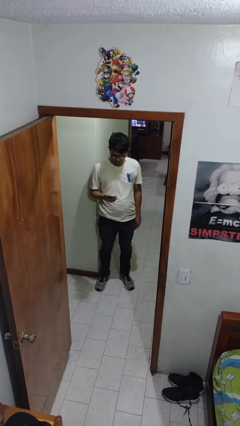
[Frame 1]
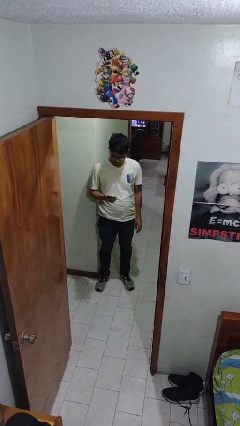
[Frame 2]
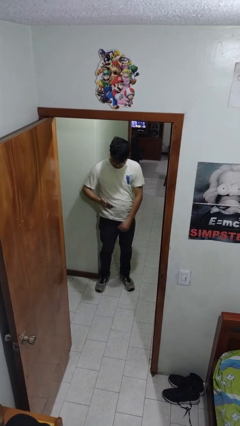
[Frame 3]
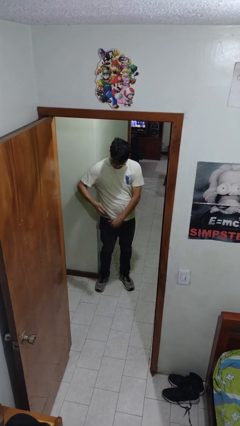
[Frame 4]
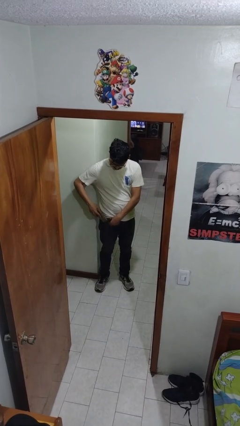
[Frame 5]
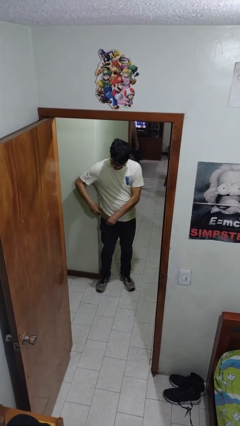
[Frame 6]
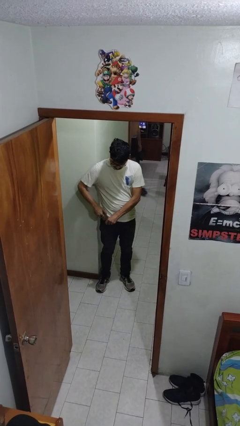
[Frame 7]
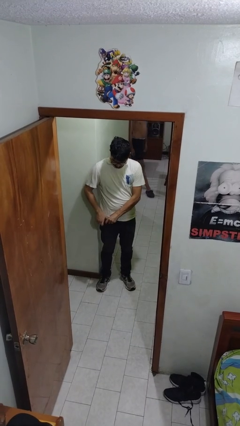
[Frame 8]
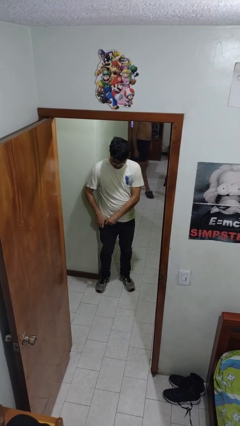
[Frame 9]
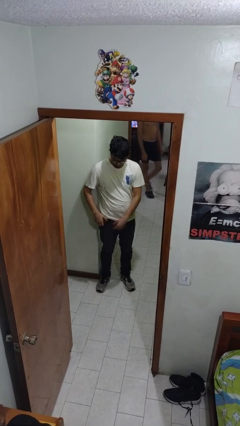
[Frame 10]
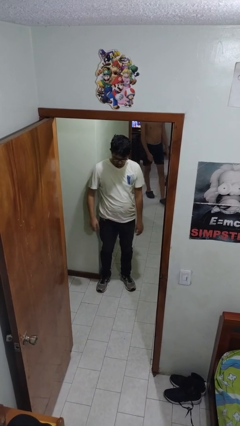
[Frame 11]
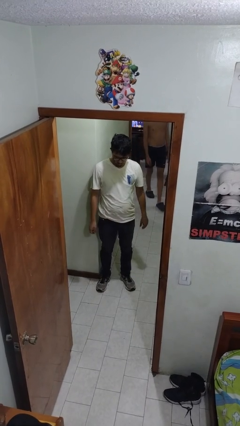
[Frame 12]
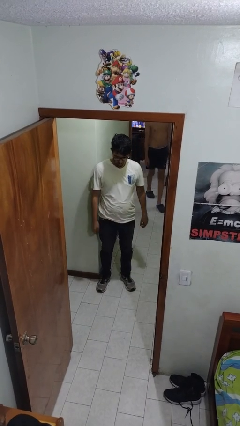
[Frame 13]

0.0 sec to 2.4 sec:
person puts phone into pocket

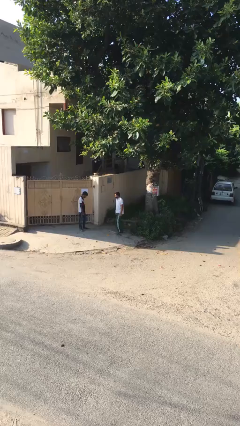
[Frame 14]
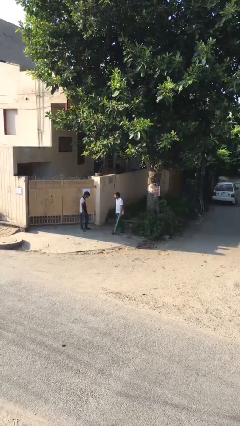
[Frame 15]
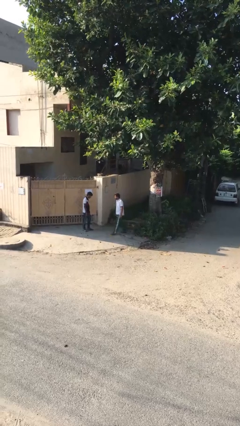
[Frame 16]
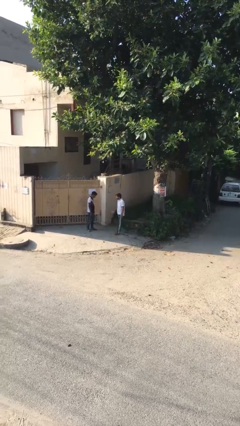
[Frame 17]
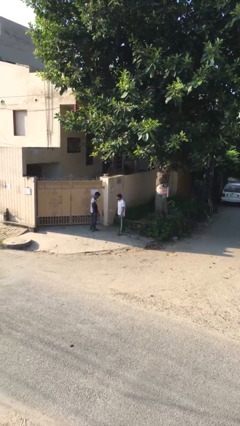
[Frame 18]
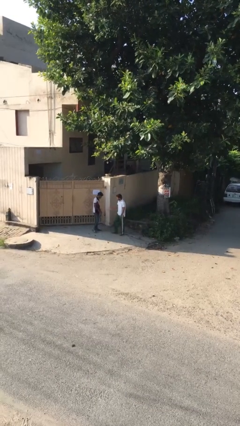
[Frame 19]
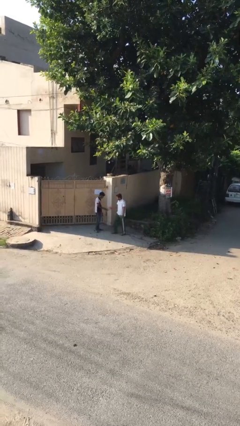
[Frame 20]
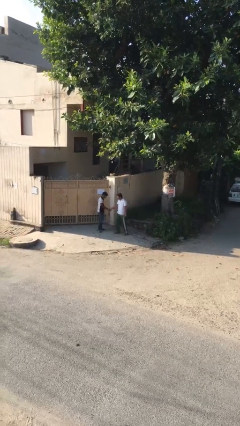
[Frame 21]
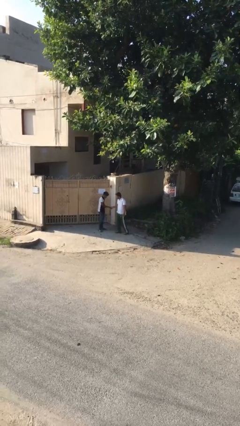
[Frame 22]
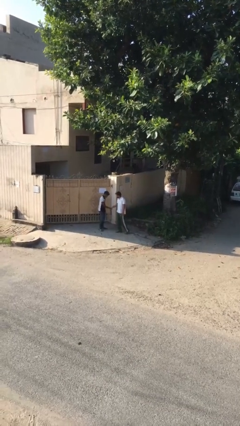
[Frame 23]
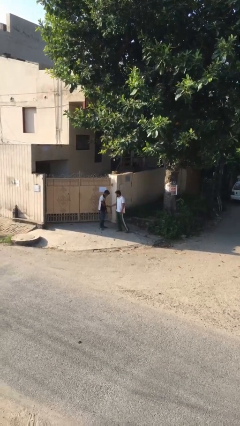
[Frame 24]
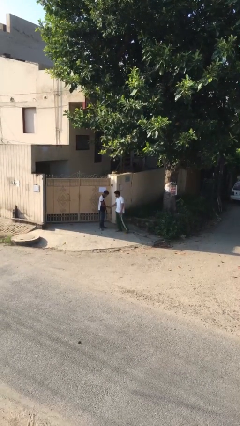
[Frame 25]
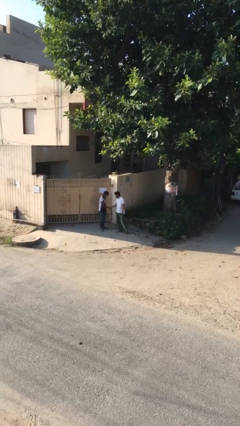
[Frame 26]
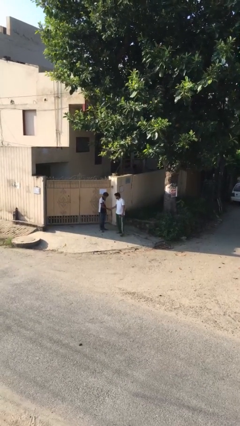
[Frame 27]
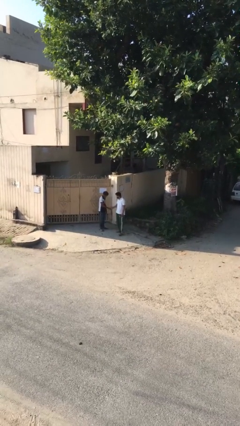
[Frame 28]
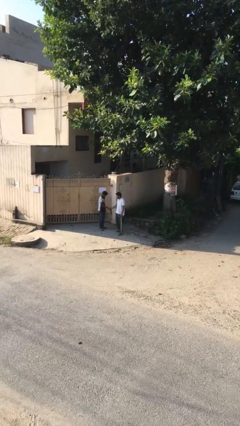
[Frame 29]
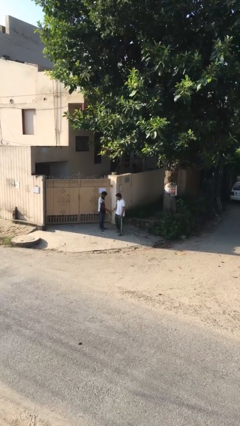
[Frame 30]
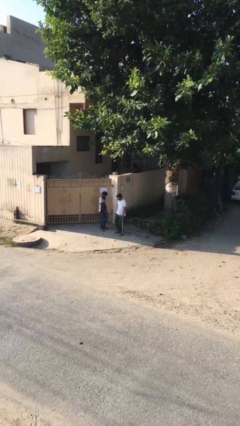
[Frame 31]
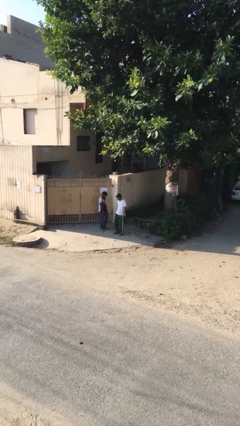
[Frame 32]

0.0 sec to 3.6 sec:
person shakes hand

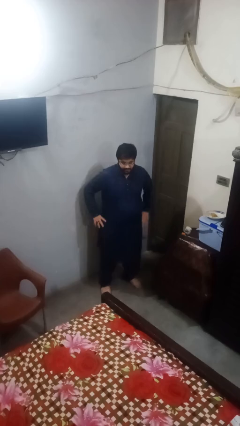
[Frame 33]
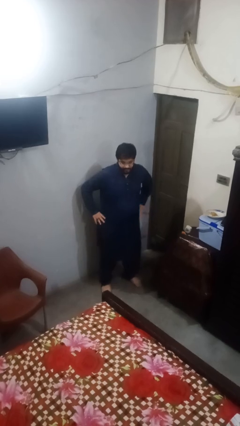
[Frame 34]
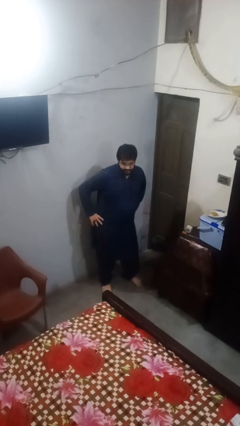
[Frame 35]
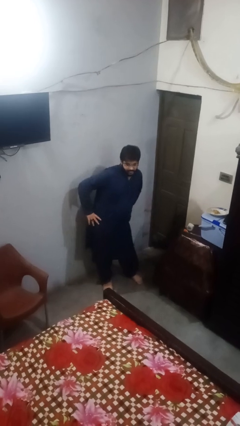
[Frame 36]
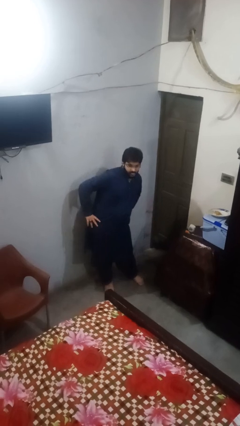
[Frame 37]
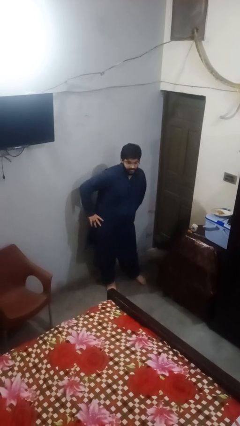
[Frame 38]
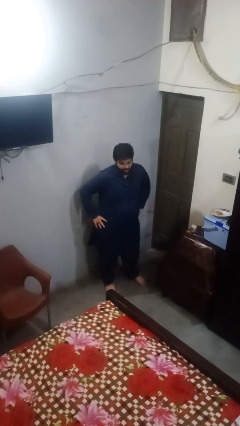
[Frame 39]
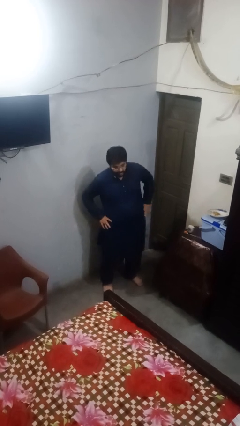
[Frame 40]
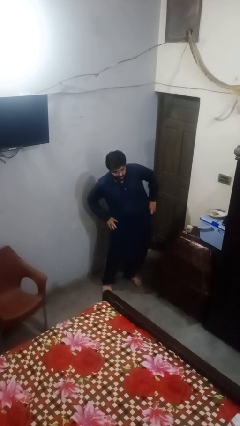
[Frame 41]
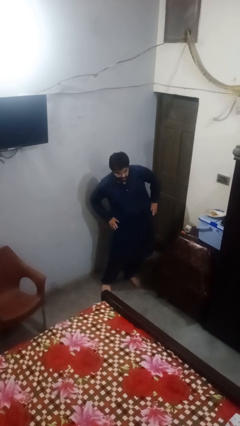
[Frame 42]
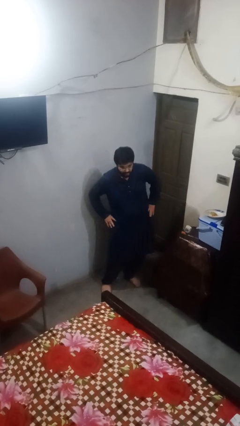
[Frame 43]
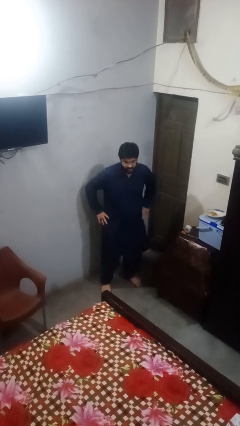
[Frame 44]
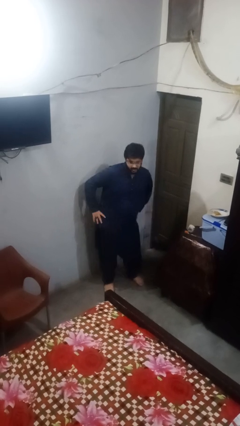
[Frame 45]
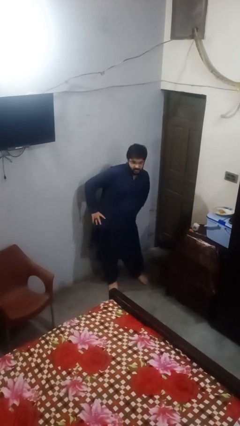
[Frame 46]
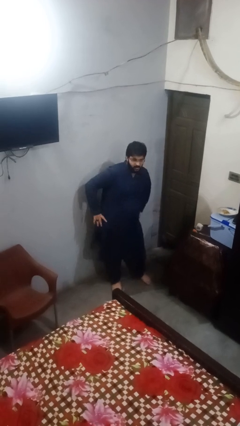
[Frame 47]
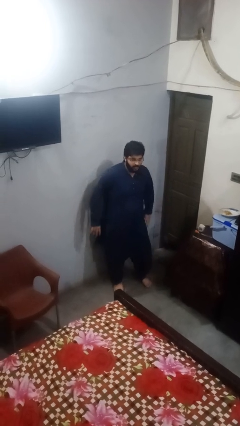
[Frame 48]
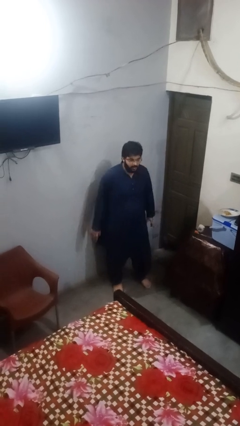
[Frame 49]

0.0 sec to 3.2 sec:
person wiggles hips

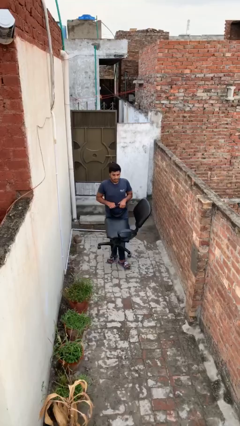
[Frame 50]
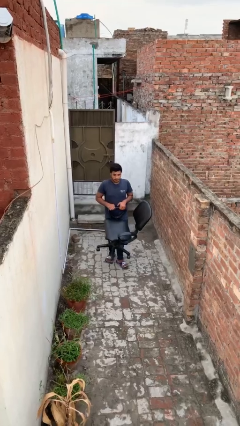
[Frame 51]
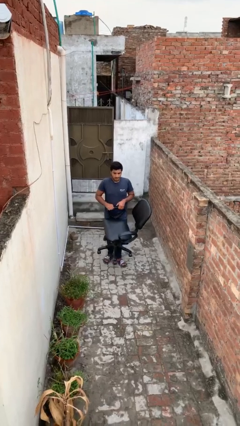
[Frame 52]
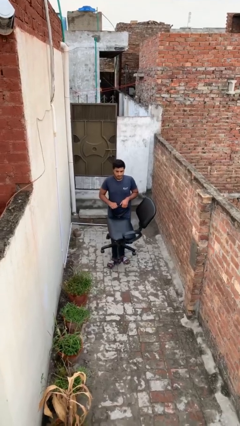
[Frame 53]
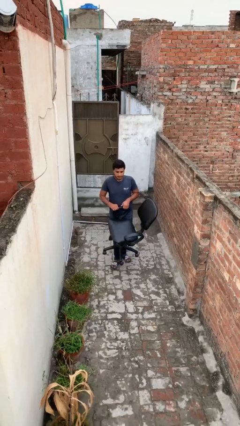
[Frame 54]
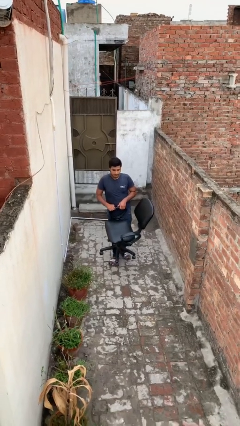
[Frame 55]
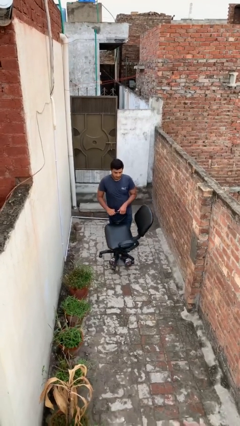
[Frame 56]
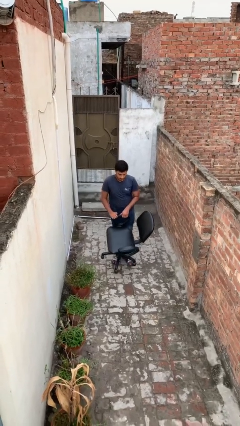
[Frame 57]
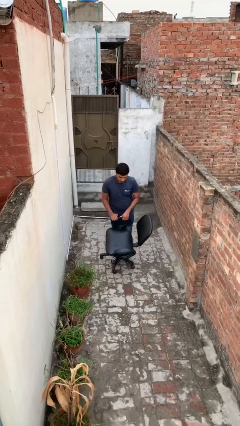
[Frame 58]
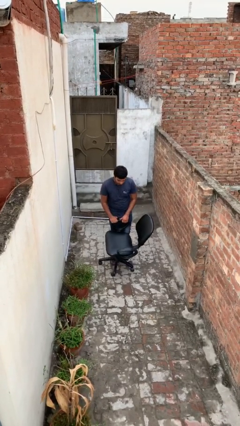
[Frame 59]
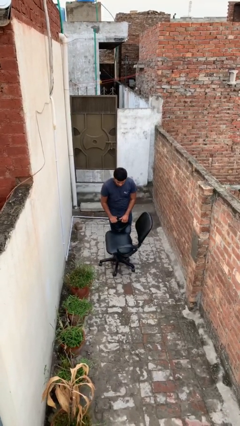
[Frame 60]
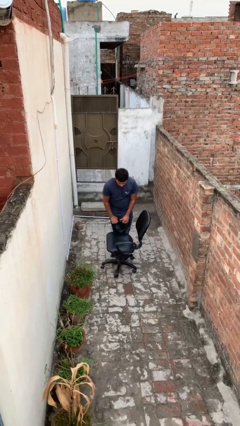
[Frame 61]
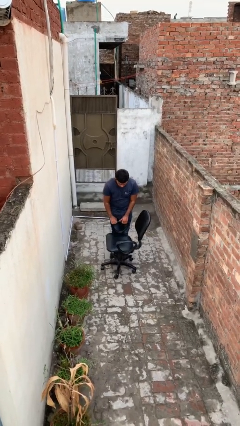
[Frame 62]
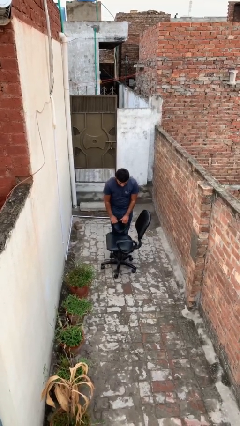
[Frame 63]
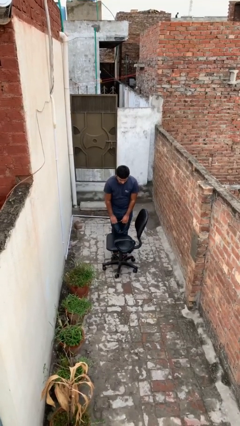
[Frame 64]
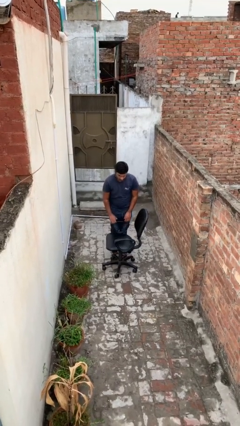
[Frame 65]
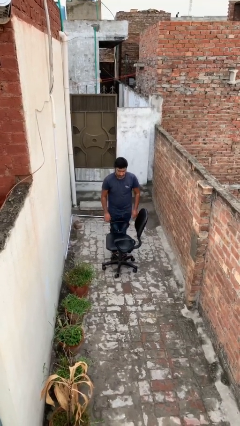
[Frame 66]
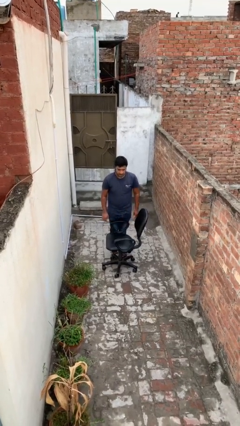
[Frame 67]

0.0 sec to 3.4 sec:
person puts down object on floor

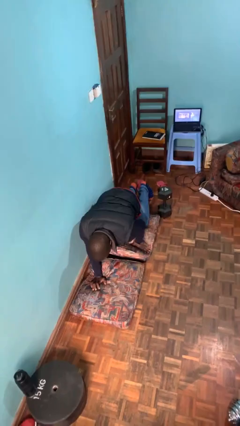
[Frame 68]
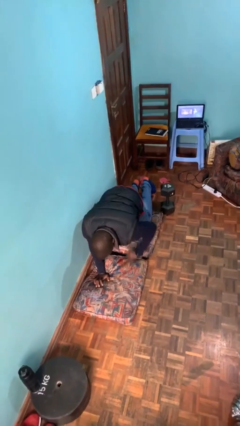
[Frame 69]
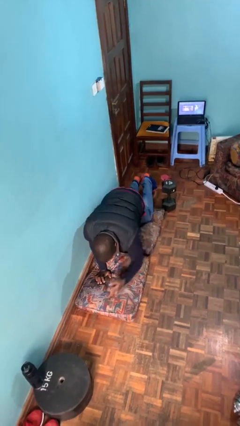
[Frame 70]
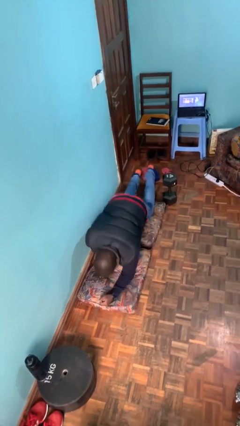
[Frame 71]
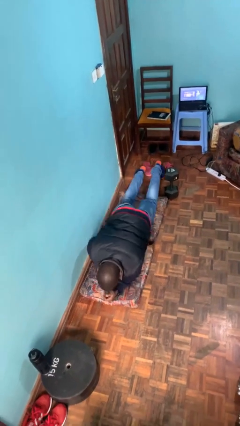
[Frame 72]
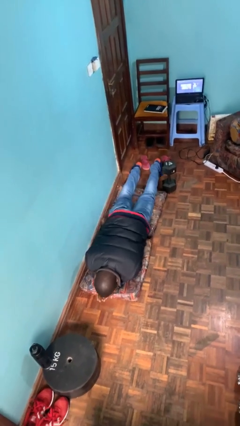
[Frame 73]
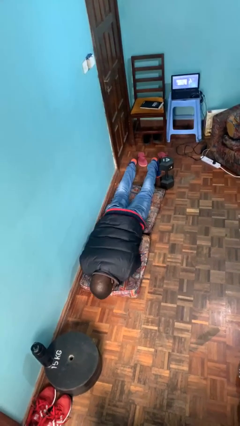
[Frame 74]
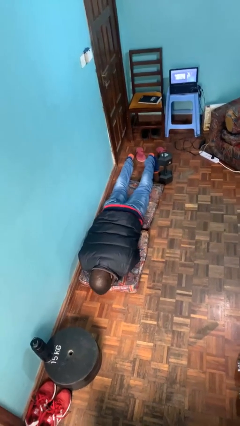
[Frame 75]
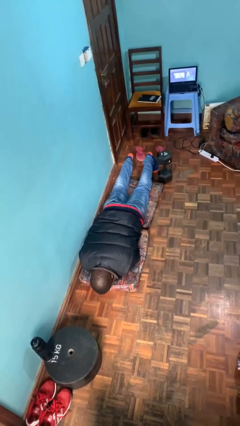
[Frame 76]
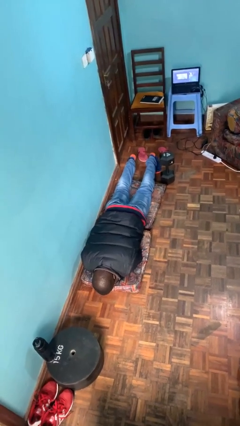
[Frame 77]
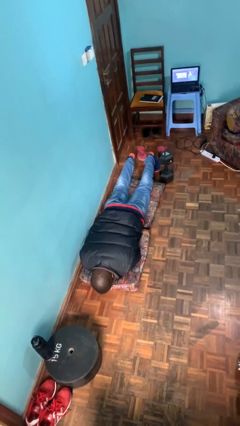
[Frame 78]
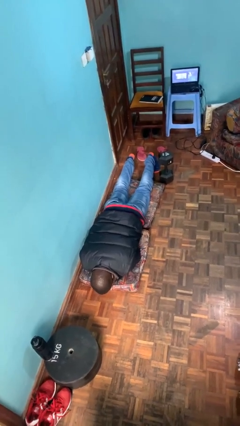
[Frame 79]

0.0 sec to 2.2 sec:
person lies down on floor

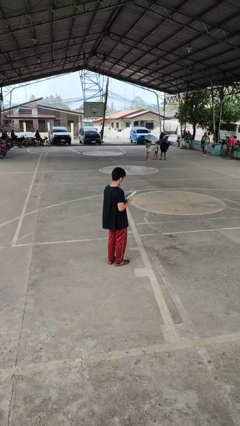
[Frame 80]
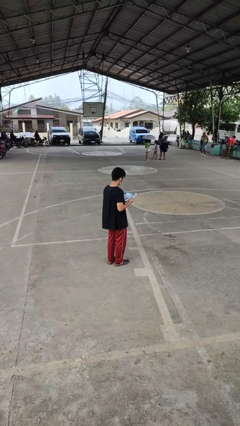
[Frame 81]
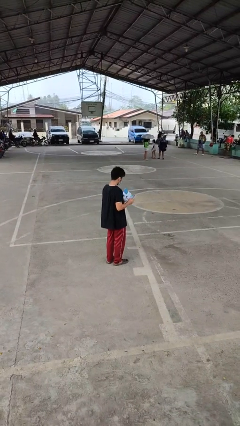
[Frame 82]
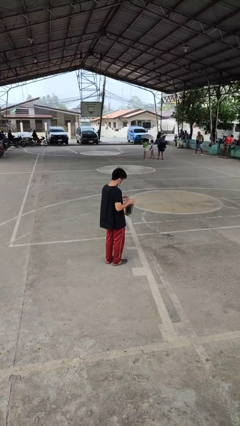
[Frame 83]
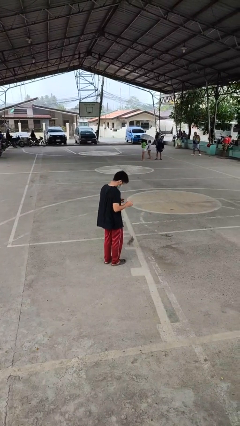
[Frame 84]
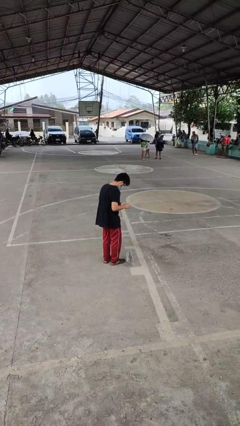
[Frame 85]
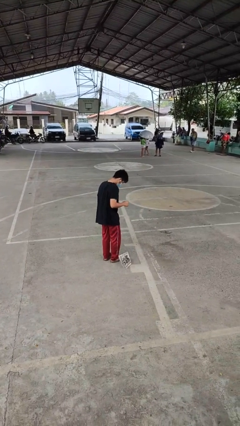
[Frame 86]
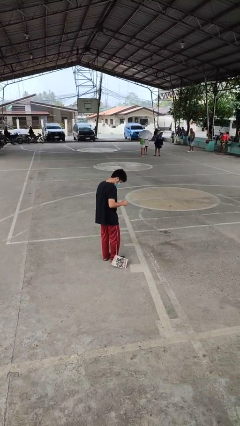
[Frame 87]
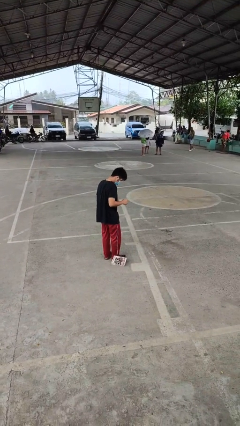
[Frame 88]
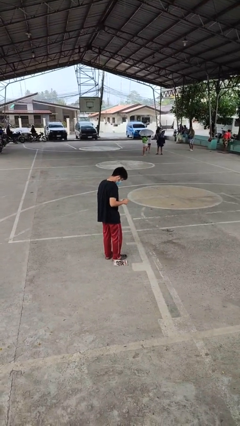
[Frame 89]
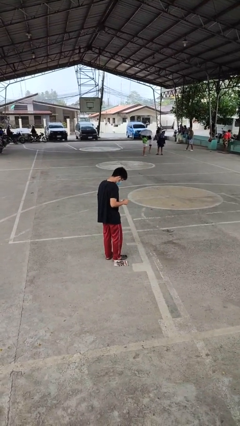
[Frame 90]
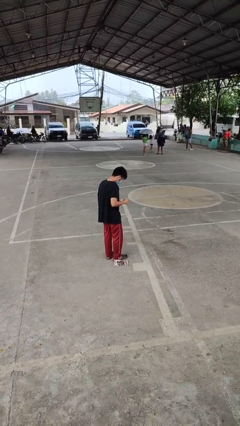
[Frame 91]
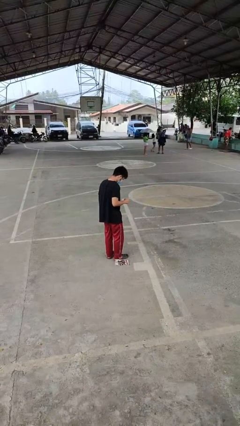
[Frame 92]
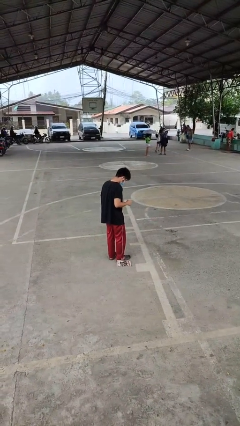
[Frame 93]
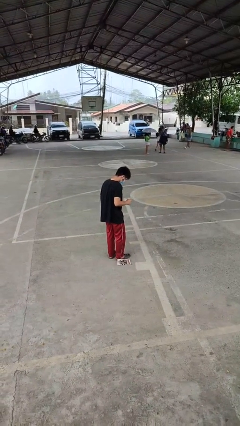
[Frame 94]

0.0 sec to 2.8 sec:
person drops object
